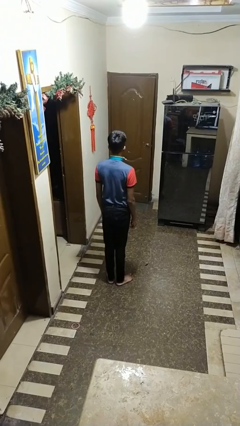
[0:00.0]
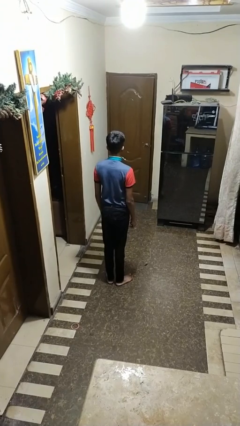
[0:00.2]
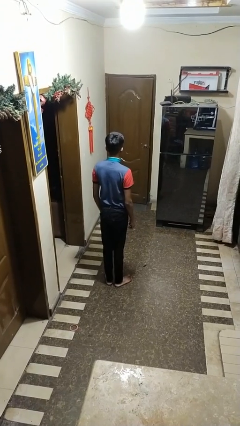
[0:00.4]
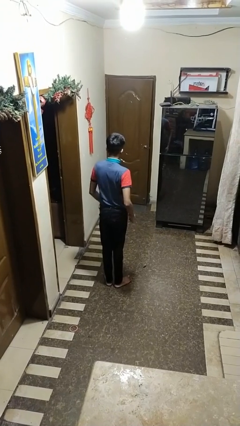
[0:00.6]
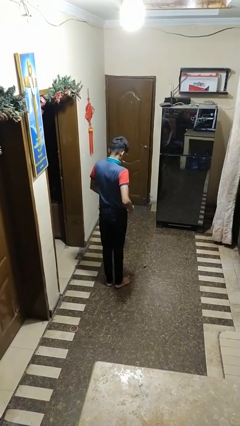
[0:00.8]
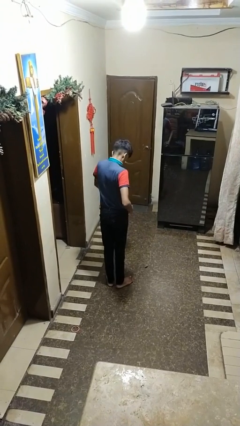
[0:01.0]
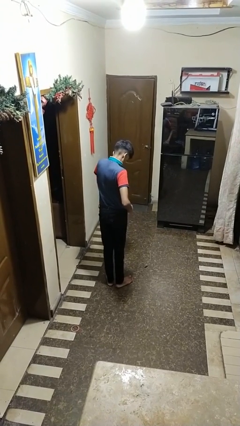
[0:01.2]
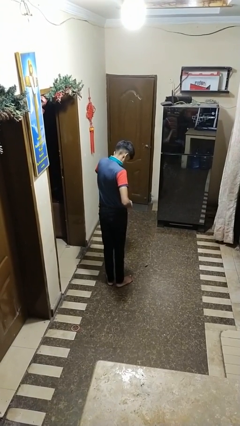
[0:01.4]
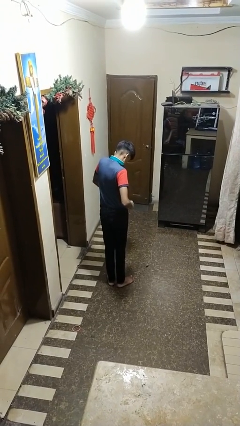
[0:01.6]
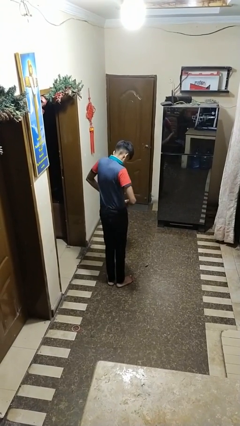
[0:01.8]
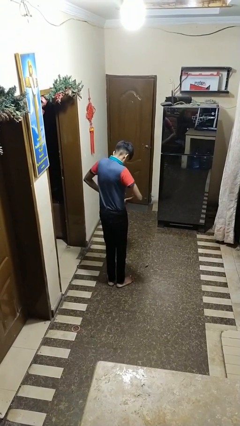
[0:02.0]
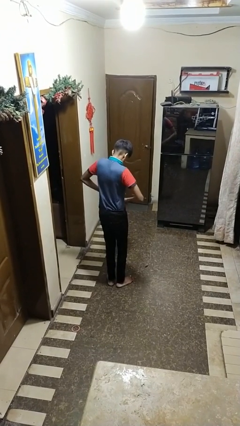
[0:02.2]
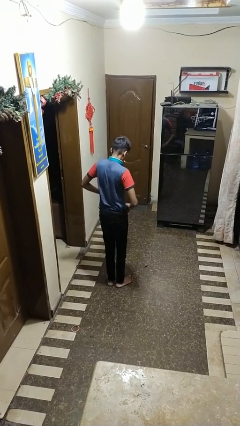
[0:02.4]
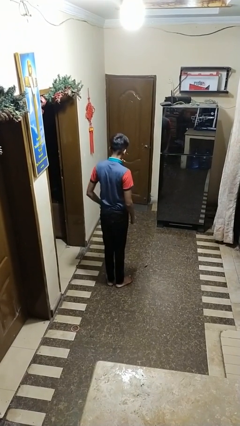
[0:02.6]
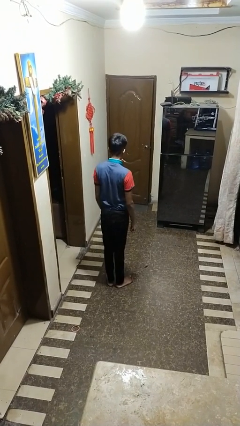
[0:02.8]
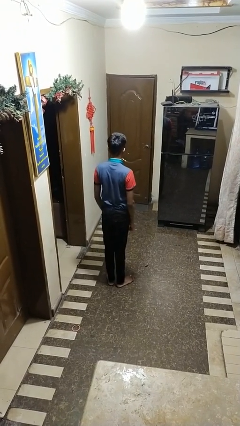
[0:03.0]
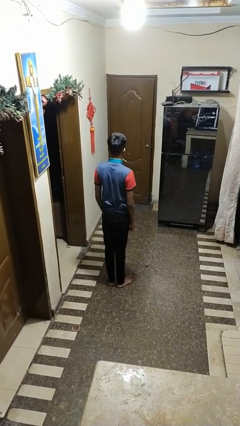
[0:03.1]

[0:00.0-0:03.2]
person hikes up pants

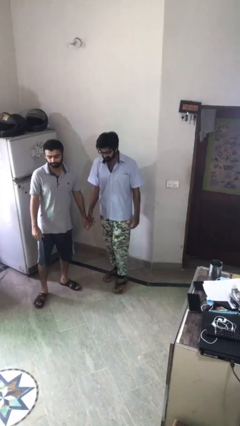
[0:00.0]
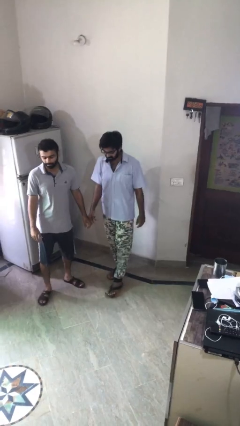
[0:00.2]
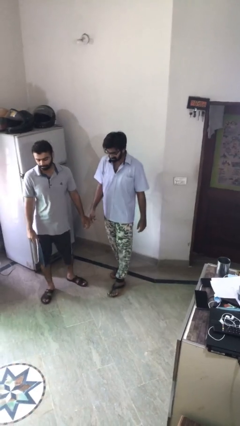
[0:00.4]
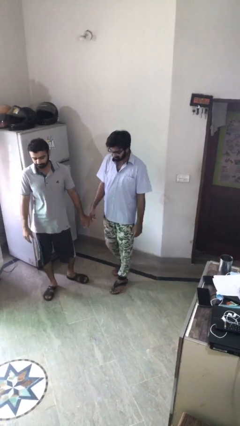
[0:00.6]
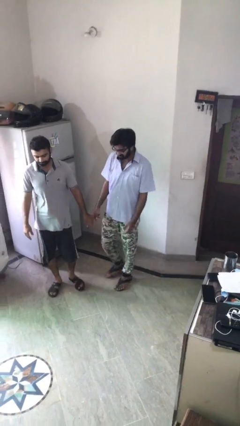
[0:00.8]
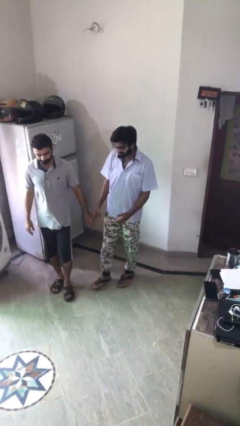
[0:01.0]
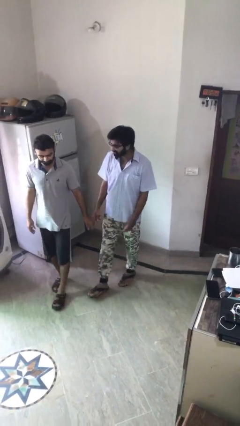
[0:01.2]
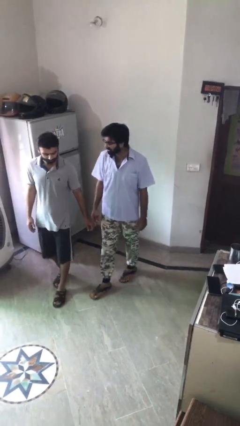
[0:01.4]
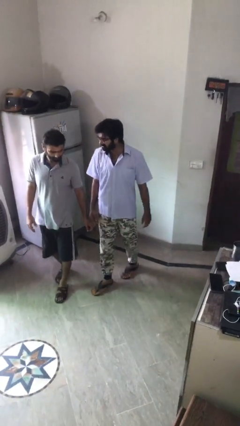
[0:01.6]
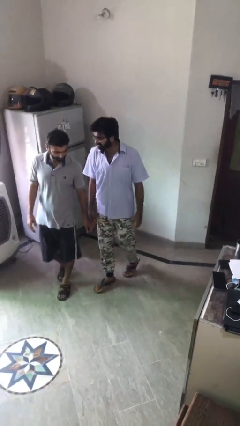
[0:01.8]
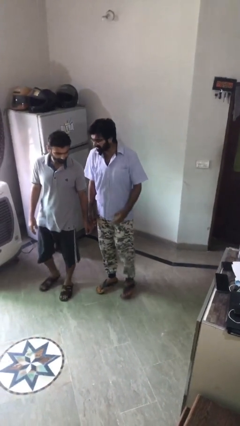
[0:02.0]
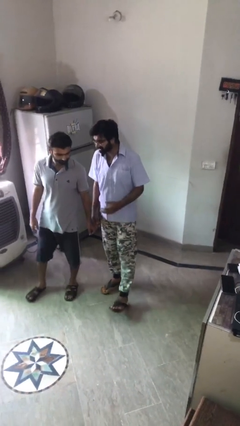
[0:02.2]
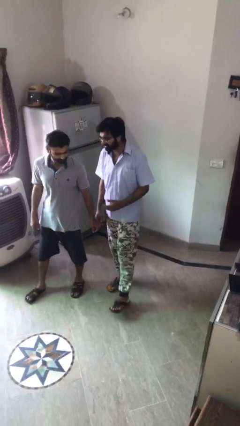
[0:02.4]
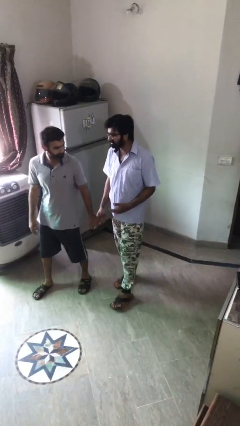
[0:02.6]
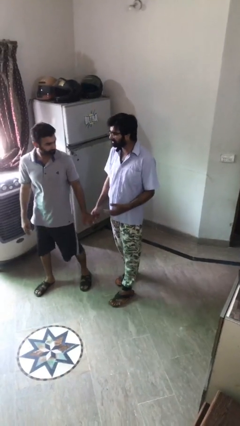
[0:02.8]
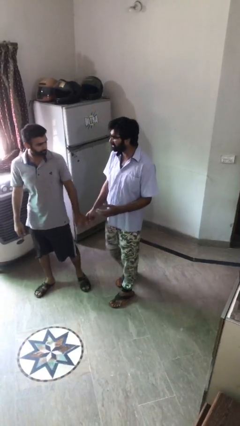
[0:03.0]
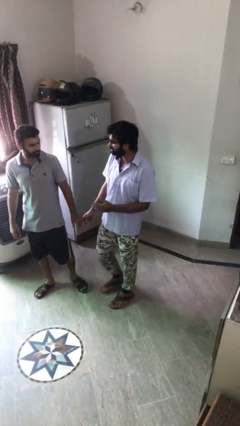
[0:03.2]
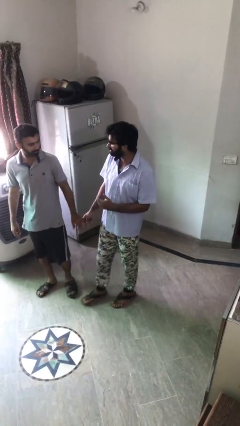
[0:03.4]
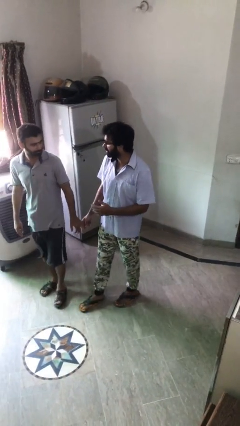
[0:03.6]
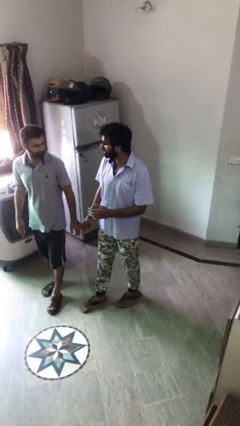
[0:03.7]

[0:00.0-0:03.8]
person holds hand

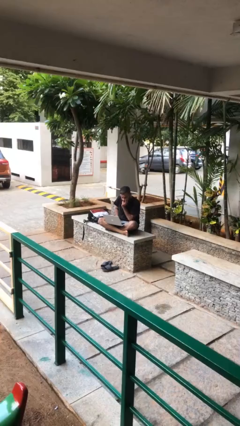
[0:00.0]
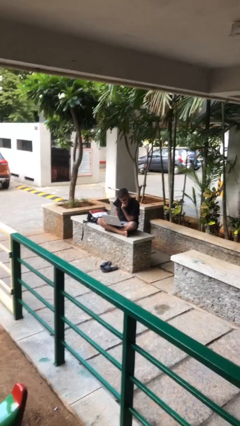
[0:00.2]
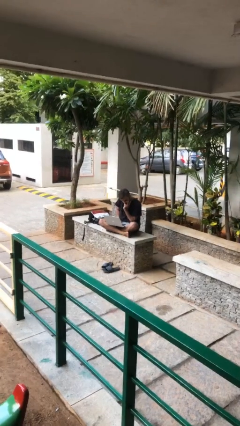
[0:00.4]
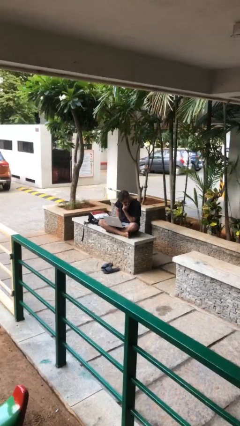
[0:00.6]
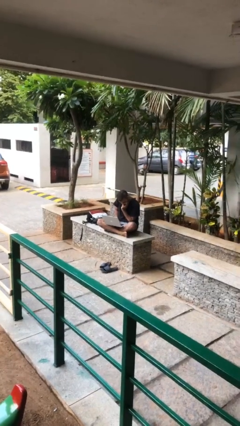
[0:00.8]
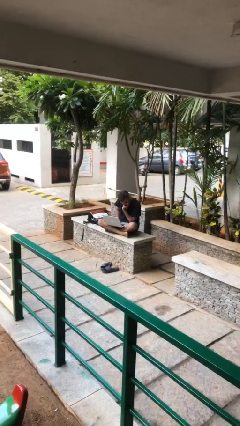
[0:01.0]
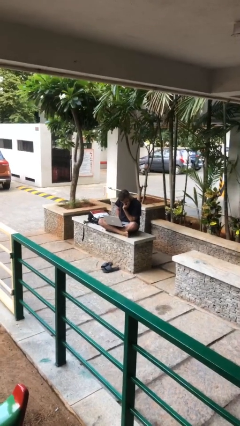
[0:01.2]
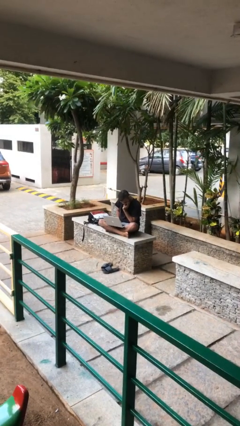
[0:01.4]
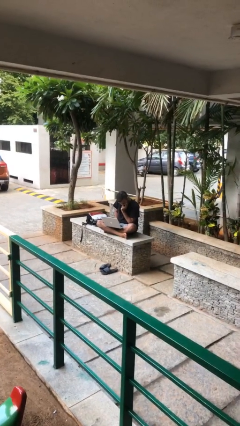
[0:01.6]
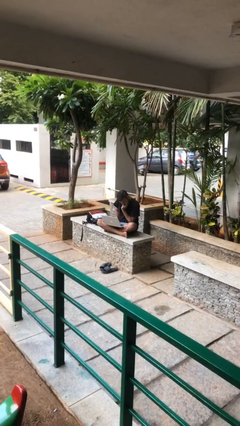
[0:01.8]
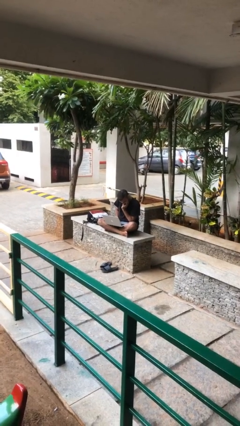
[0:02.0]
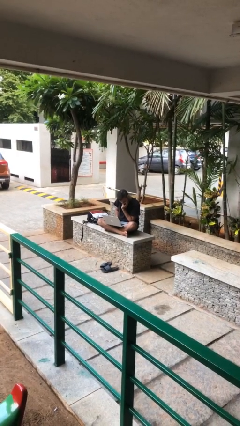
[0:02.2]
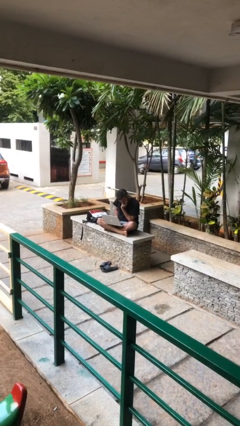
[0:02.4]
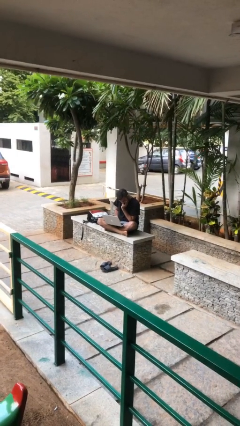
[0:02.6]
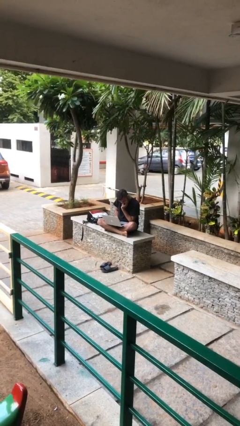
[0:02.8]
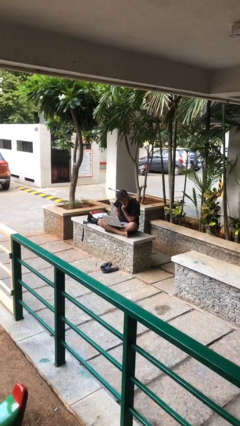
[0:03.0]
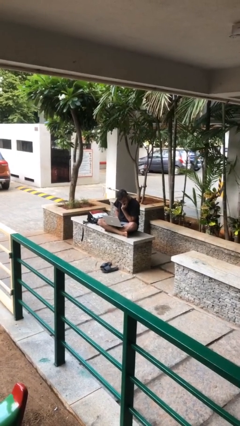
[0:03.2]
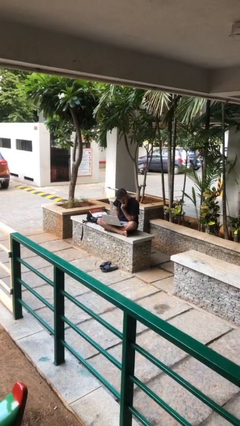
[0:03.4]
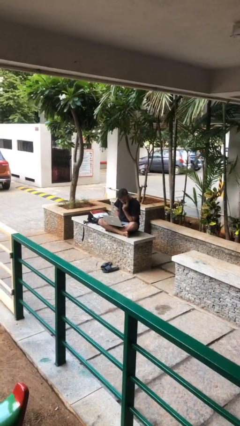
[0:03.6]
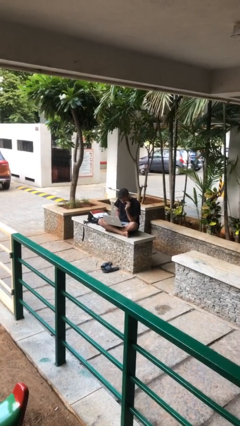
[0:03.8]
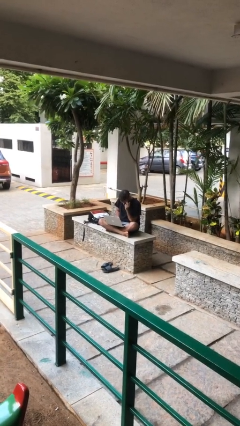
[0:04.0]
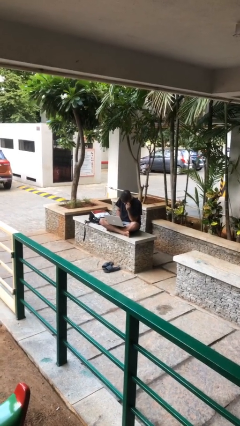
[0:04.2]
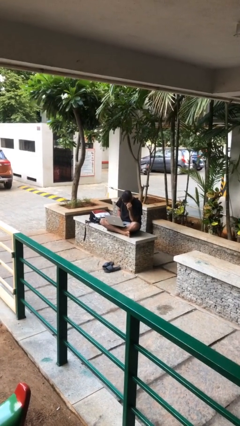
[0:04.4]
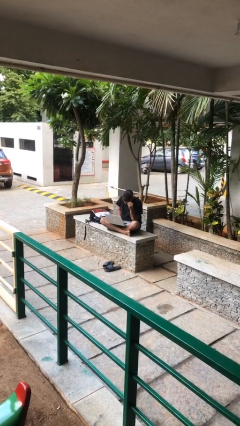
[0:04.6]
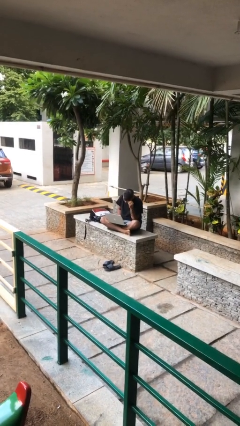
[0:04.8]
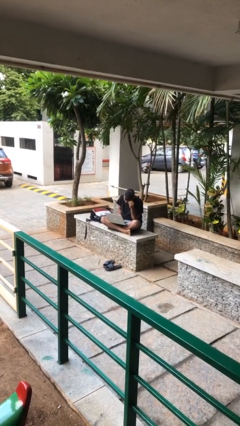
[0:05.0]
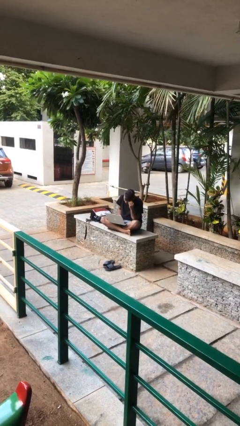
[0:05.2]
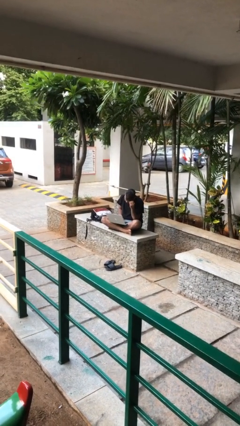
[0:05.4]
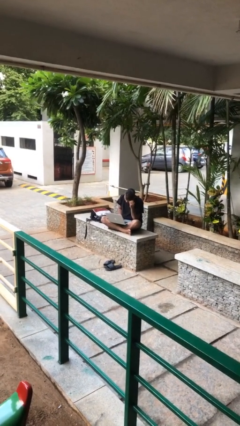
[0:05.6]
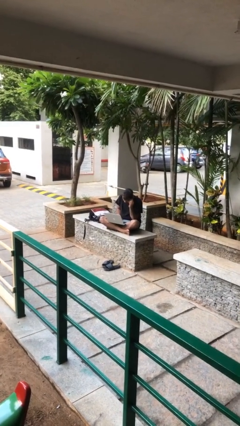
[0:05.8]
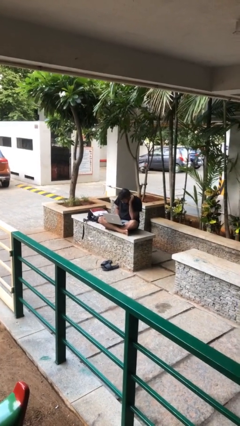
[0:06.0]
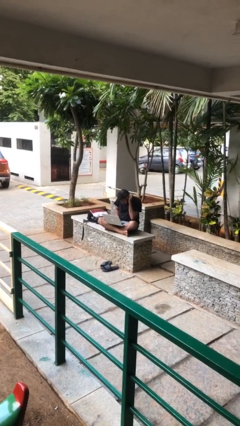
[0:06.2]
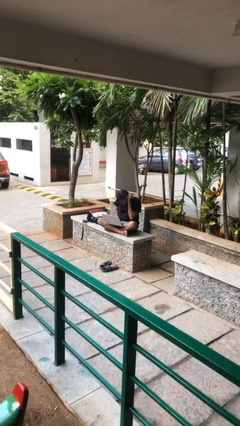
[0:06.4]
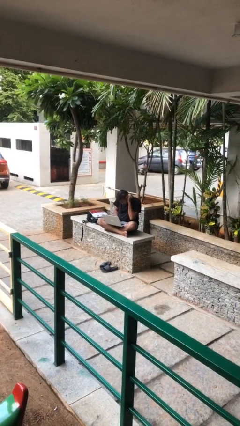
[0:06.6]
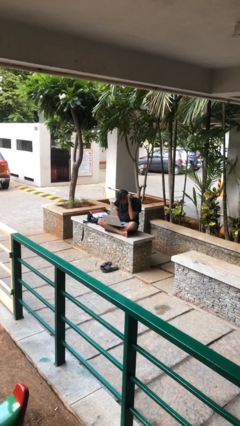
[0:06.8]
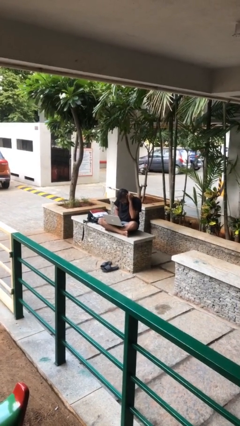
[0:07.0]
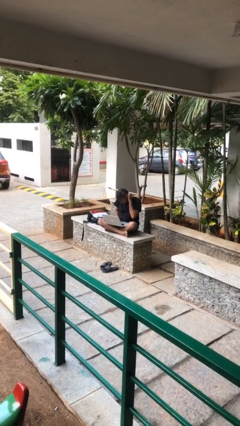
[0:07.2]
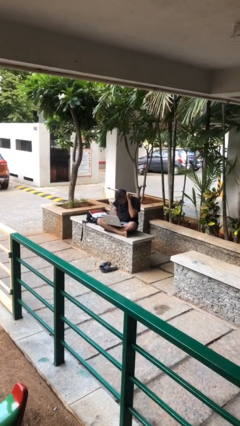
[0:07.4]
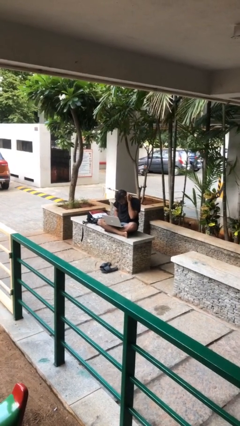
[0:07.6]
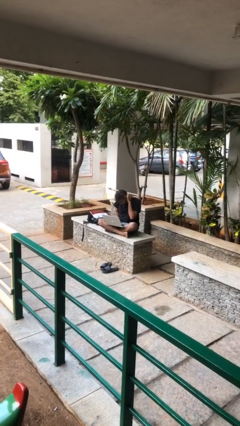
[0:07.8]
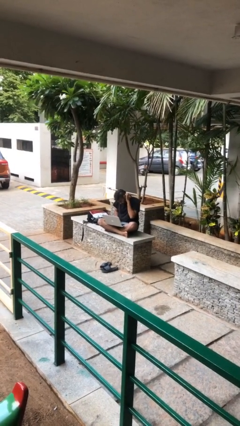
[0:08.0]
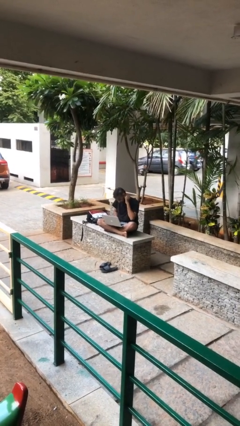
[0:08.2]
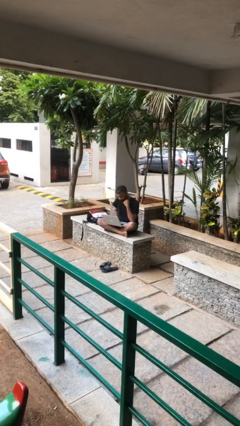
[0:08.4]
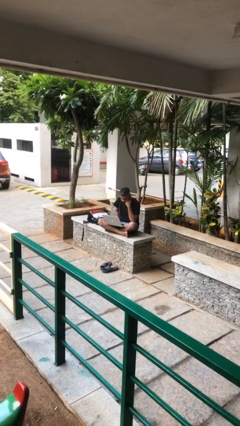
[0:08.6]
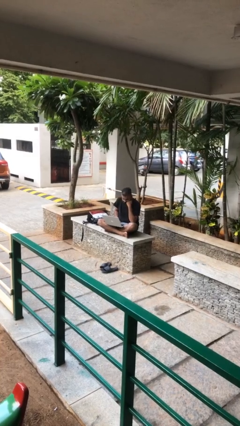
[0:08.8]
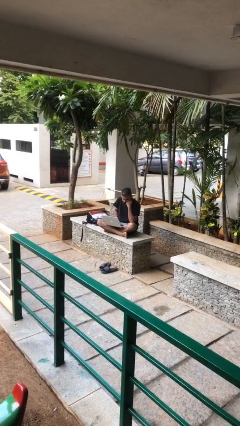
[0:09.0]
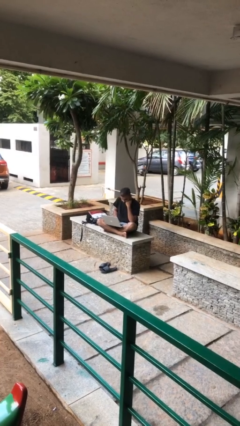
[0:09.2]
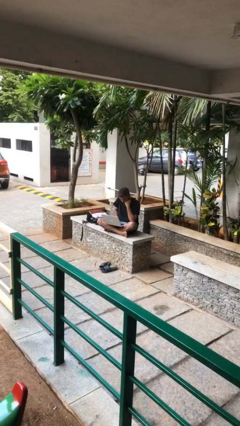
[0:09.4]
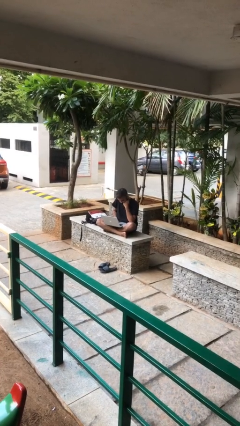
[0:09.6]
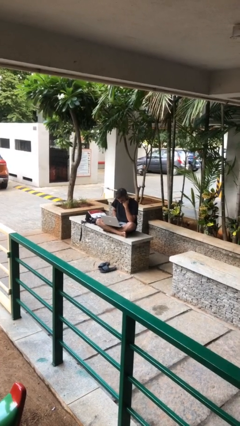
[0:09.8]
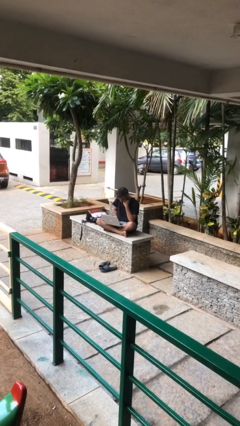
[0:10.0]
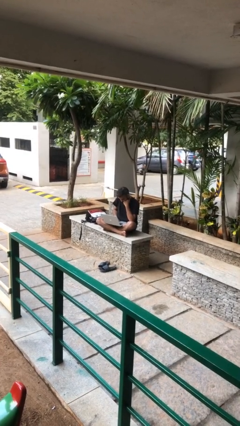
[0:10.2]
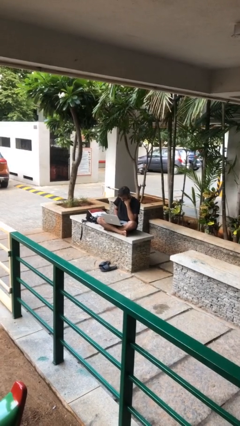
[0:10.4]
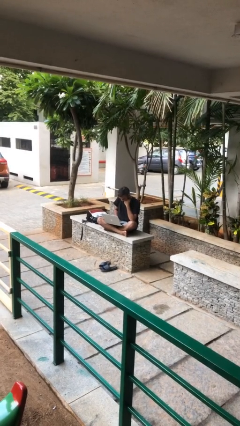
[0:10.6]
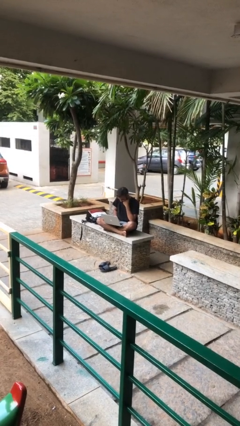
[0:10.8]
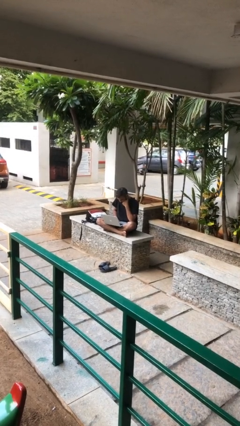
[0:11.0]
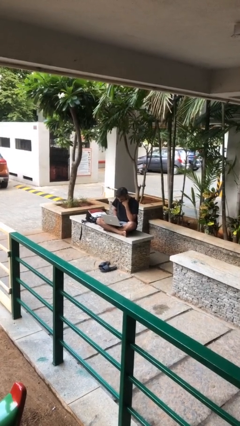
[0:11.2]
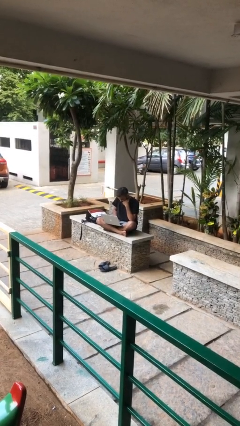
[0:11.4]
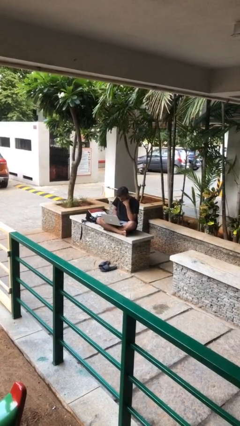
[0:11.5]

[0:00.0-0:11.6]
person interacts with laptop
